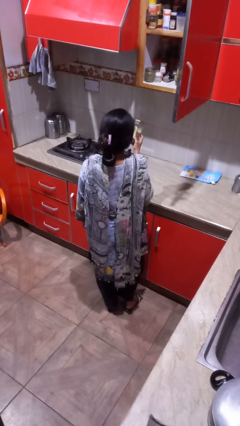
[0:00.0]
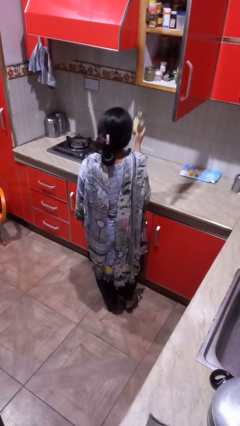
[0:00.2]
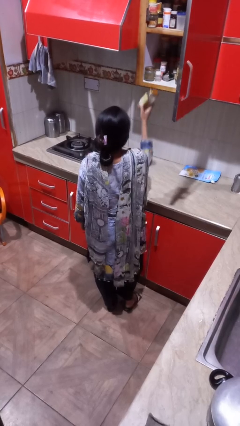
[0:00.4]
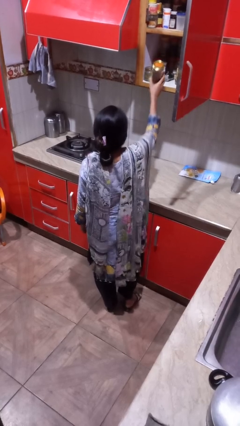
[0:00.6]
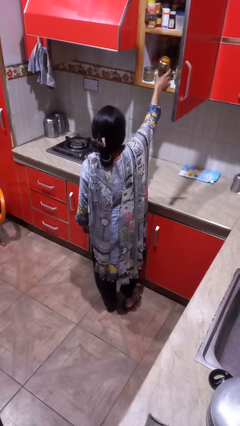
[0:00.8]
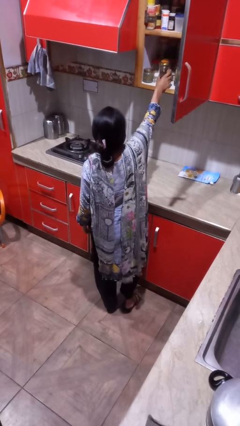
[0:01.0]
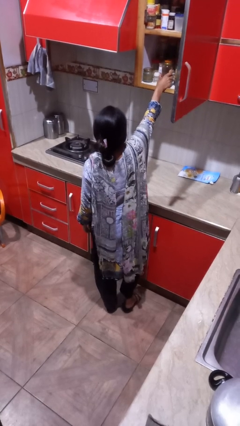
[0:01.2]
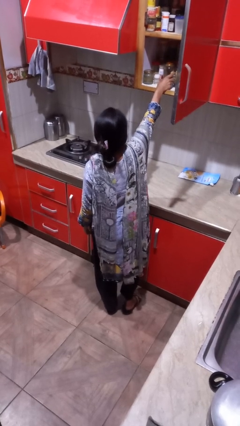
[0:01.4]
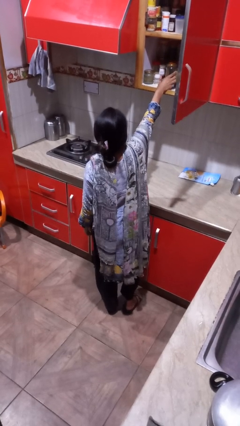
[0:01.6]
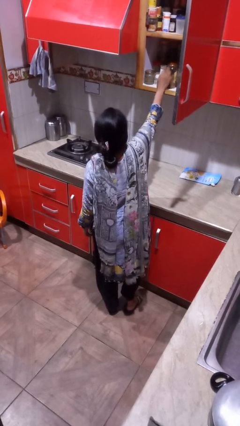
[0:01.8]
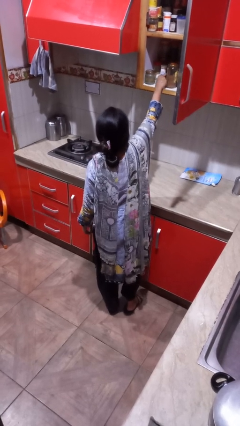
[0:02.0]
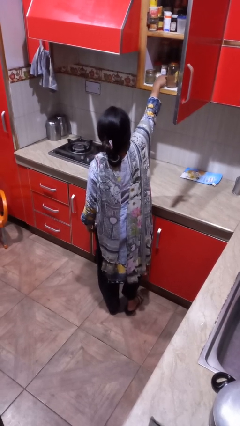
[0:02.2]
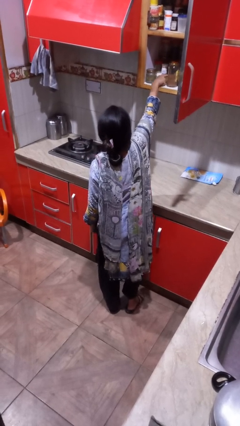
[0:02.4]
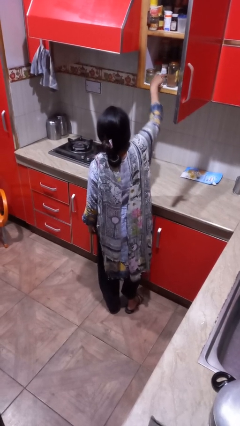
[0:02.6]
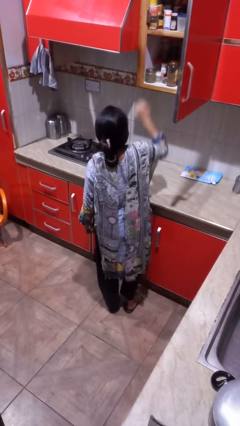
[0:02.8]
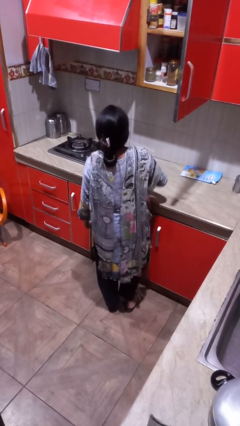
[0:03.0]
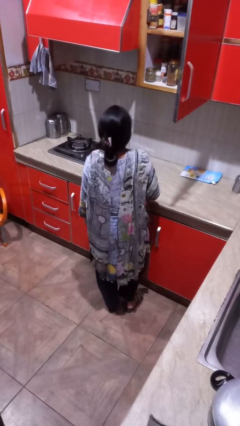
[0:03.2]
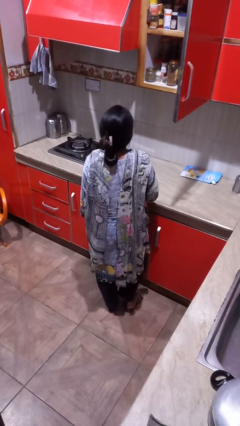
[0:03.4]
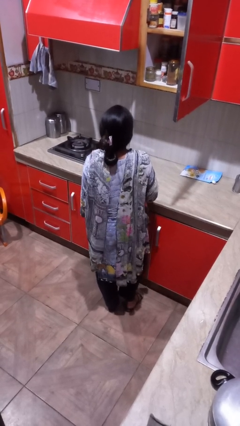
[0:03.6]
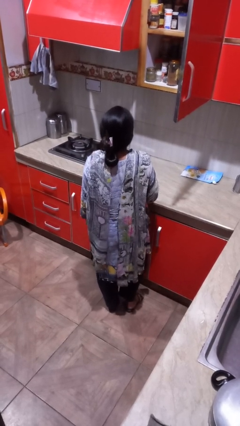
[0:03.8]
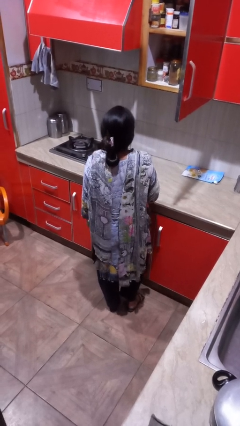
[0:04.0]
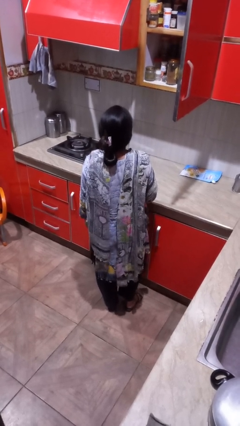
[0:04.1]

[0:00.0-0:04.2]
person puts object in cabinet

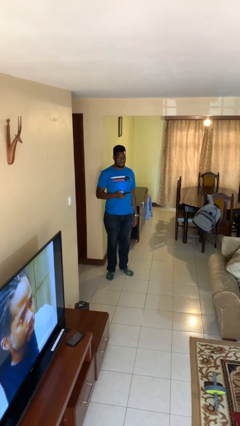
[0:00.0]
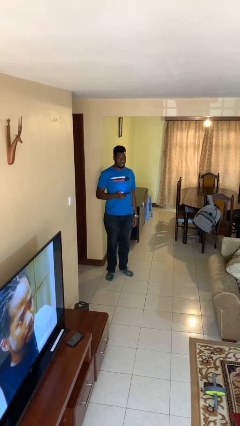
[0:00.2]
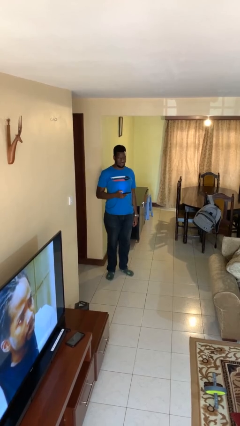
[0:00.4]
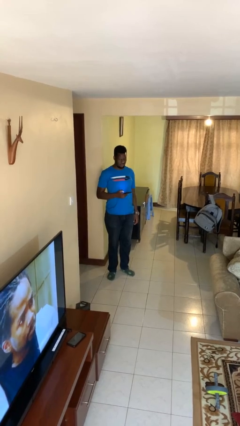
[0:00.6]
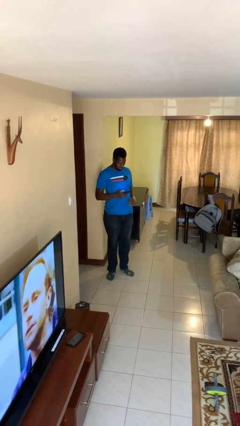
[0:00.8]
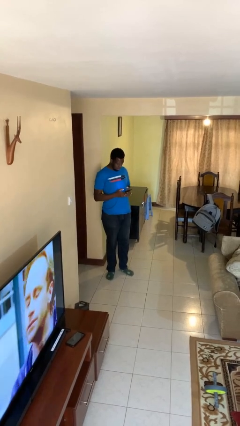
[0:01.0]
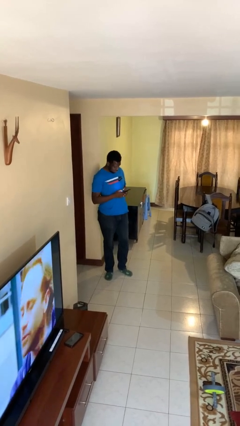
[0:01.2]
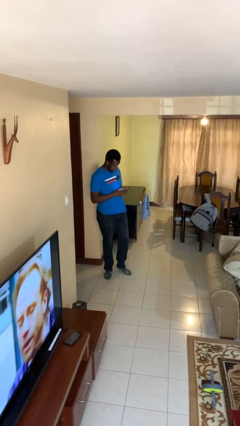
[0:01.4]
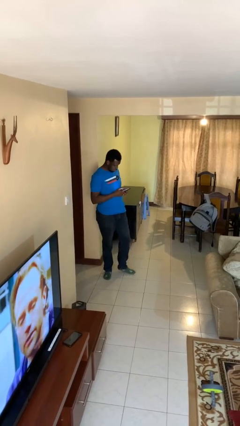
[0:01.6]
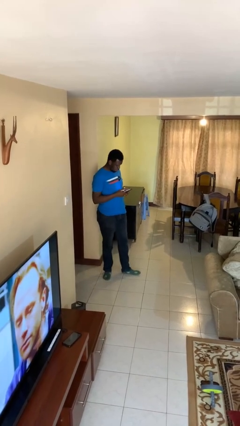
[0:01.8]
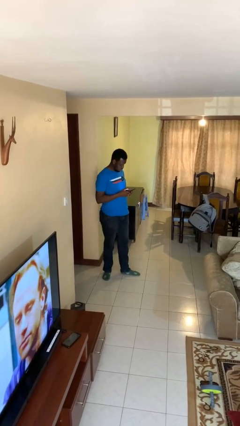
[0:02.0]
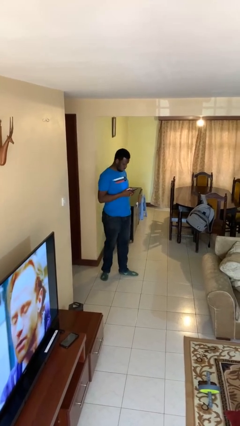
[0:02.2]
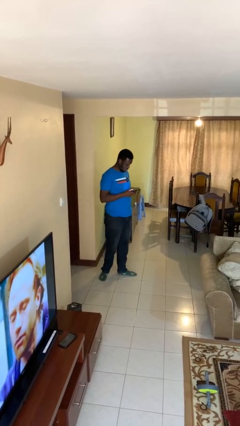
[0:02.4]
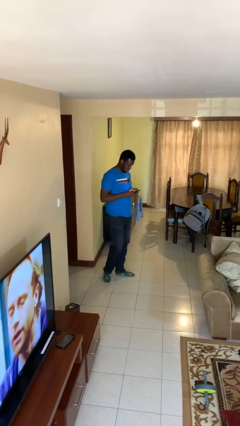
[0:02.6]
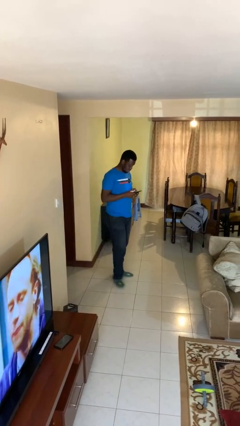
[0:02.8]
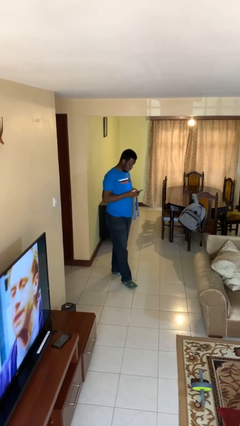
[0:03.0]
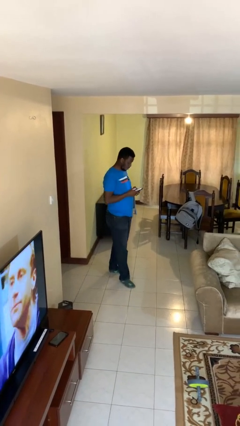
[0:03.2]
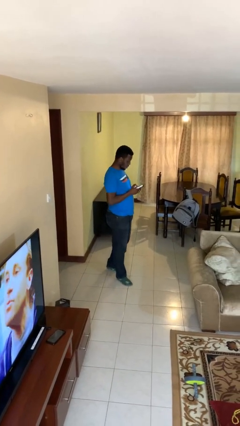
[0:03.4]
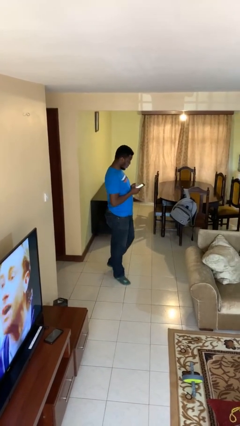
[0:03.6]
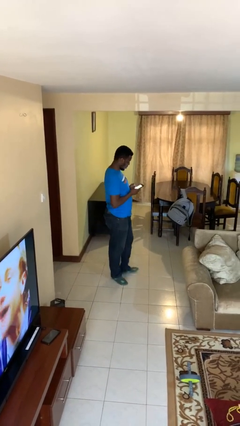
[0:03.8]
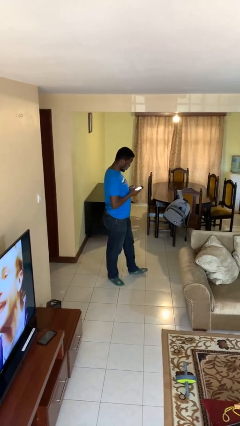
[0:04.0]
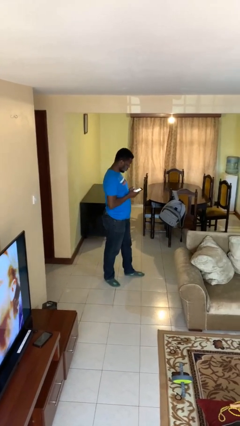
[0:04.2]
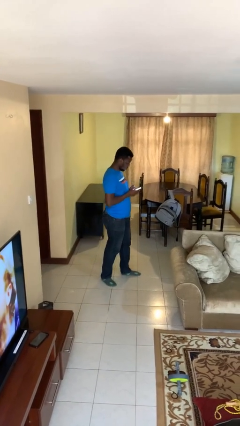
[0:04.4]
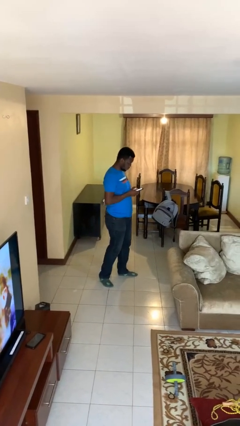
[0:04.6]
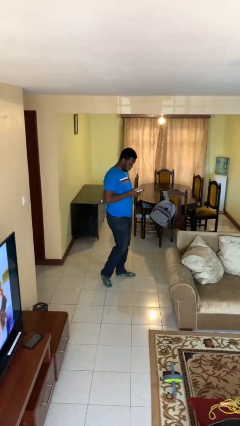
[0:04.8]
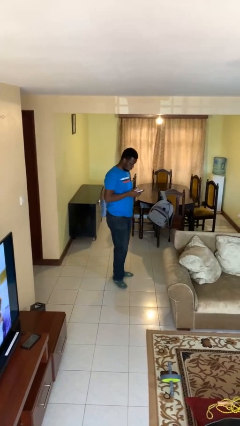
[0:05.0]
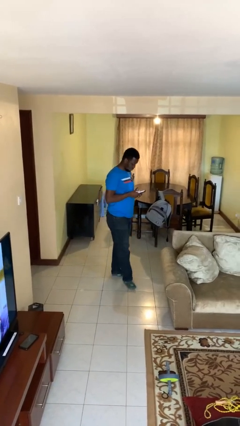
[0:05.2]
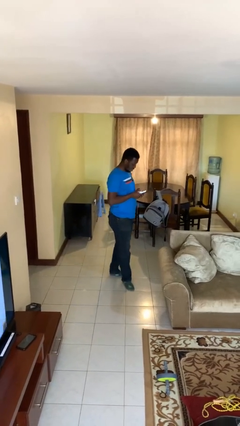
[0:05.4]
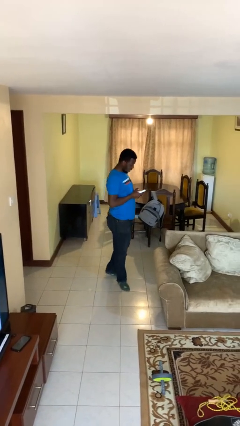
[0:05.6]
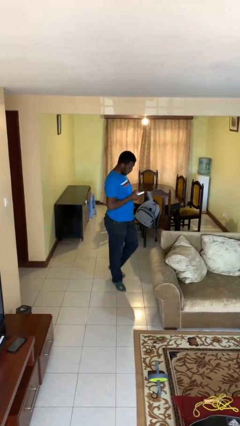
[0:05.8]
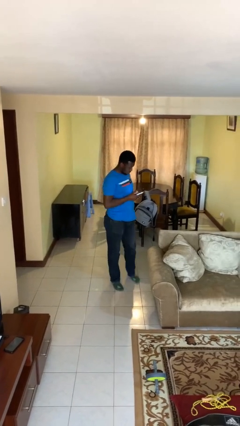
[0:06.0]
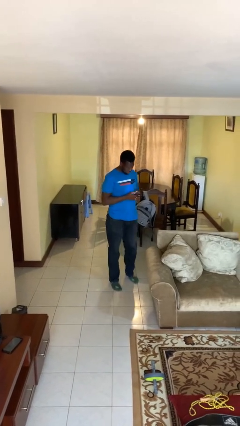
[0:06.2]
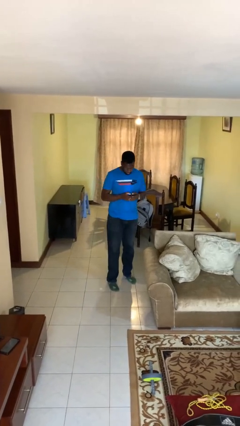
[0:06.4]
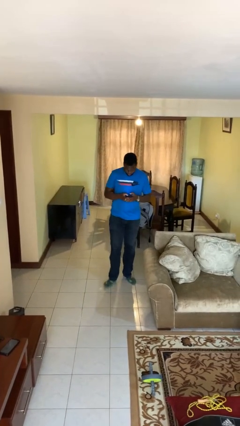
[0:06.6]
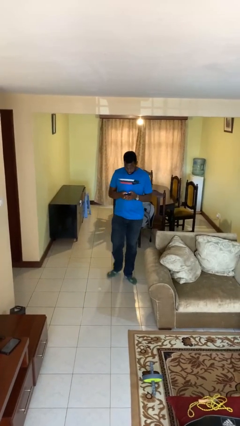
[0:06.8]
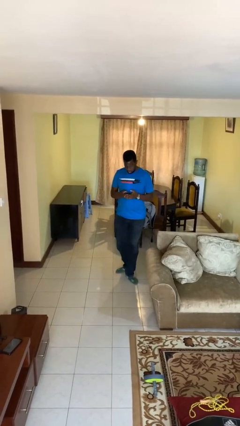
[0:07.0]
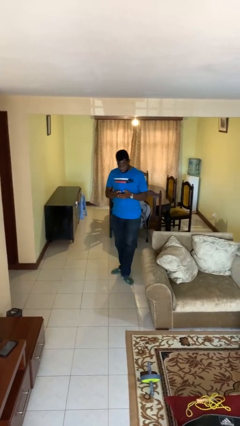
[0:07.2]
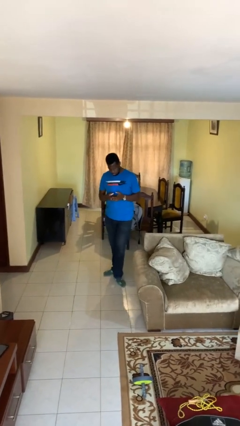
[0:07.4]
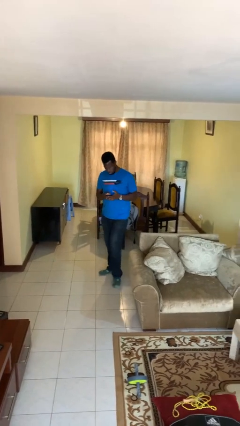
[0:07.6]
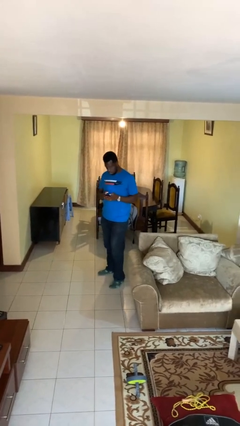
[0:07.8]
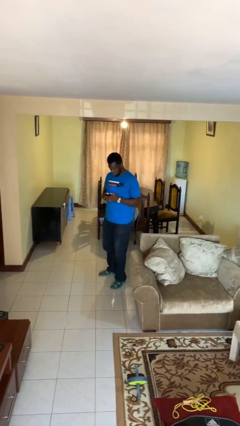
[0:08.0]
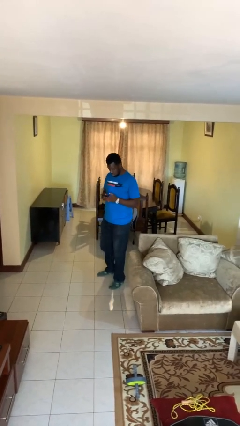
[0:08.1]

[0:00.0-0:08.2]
person texts on phone

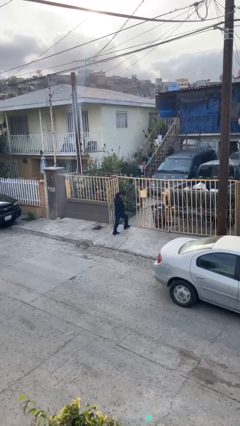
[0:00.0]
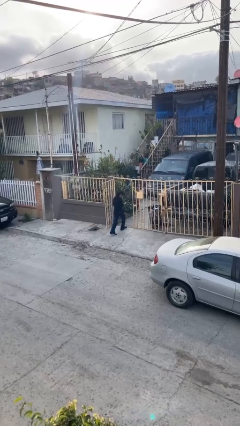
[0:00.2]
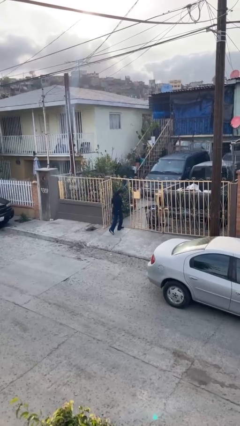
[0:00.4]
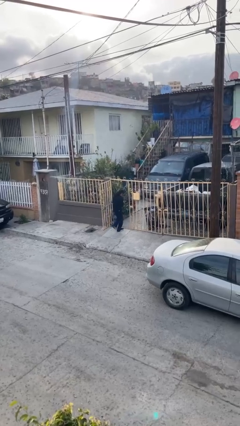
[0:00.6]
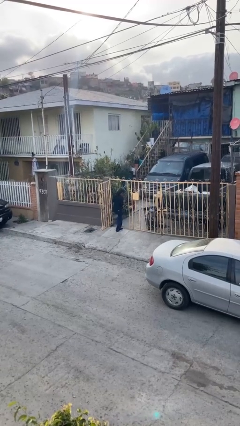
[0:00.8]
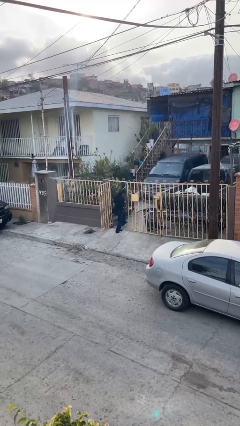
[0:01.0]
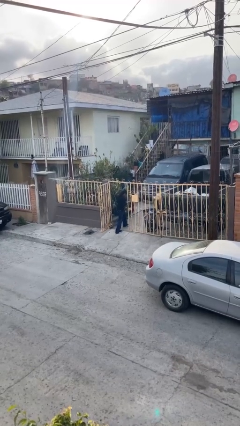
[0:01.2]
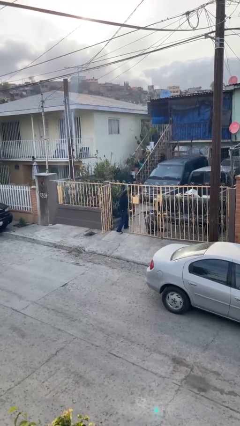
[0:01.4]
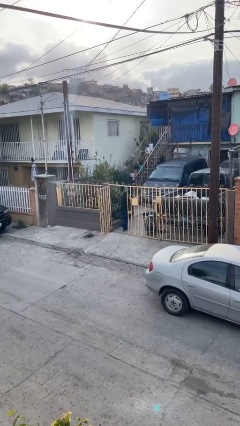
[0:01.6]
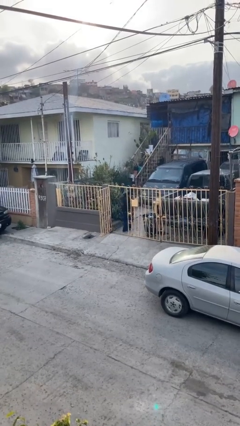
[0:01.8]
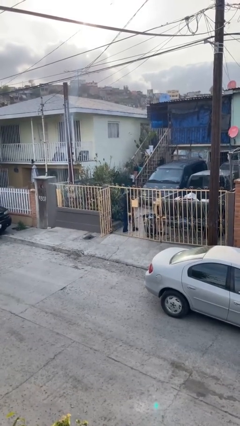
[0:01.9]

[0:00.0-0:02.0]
person exits scene through structure

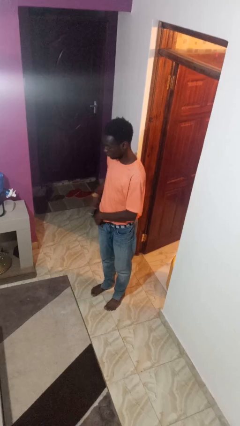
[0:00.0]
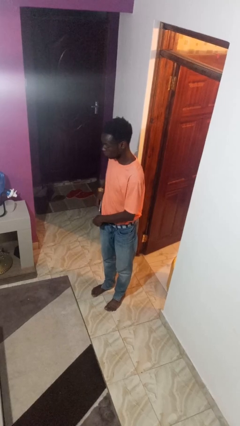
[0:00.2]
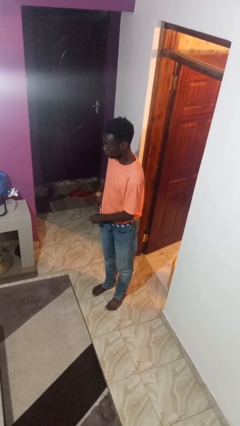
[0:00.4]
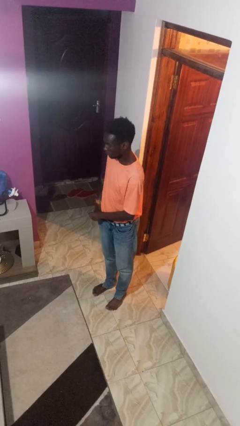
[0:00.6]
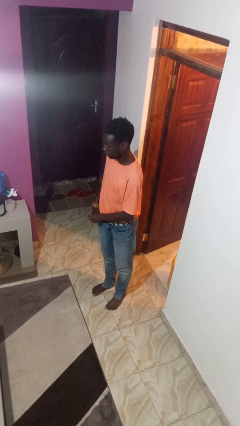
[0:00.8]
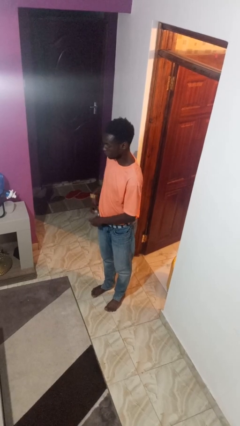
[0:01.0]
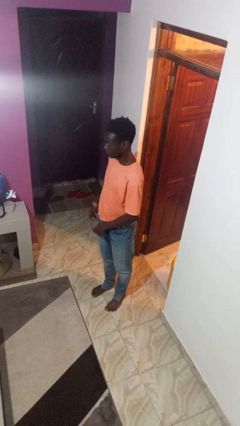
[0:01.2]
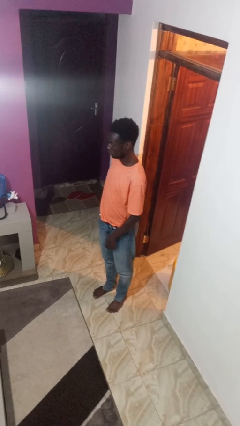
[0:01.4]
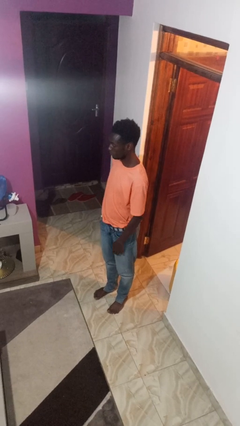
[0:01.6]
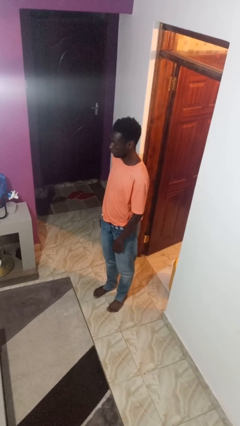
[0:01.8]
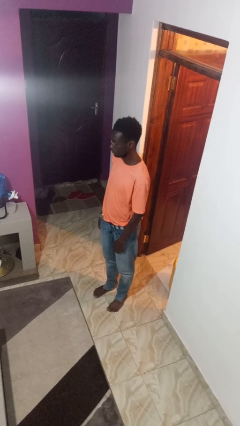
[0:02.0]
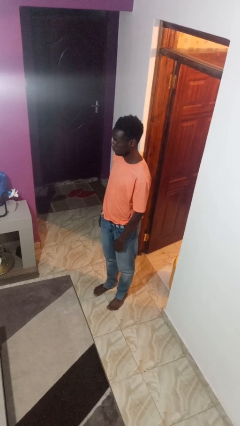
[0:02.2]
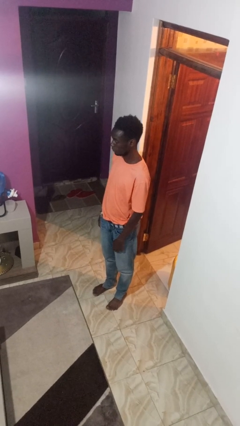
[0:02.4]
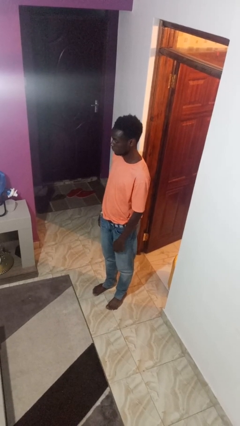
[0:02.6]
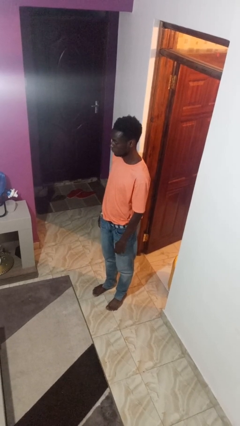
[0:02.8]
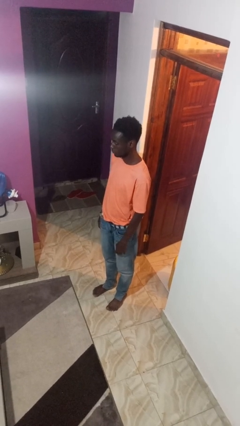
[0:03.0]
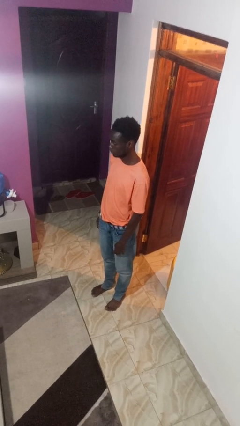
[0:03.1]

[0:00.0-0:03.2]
person puts phone into pocket
